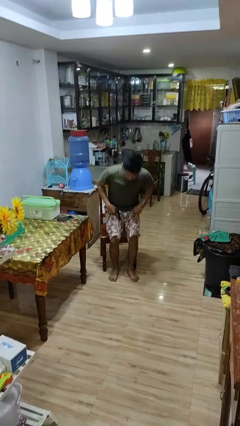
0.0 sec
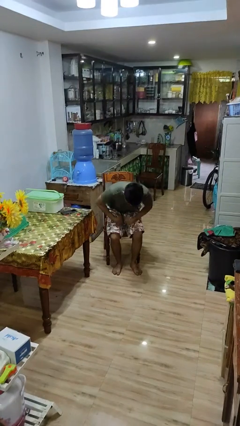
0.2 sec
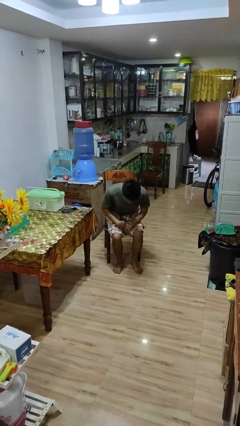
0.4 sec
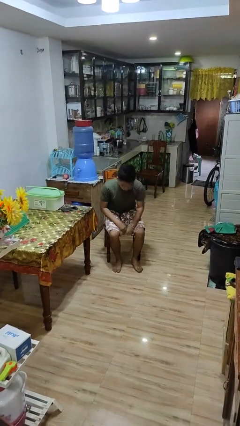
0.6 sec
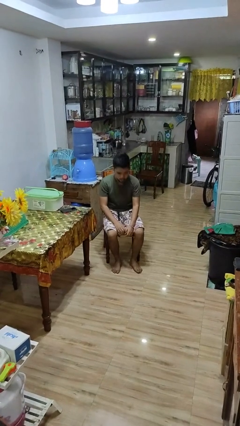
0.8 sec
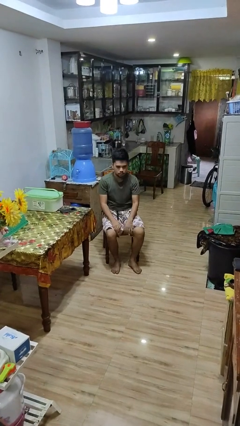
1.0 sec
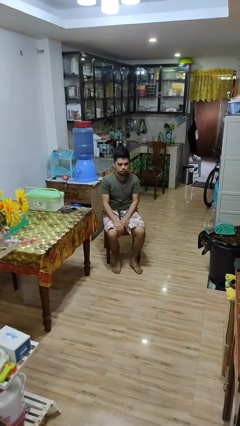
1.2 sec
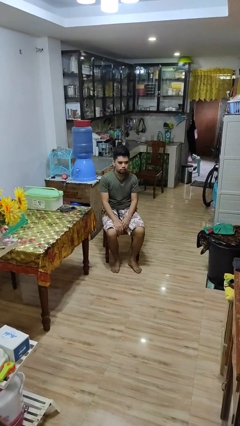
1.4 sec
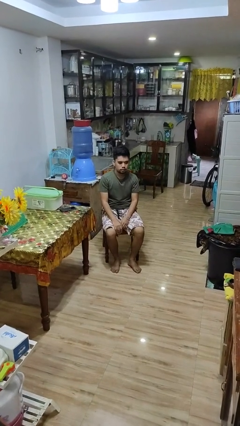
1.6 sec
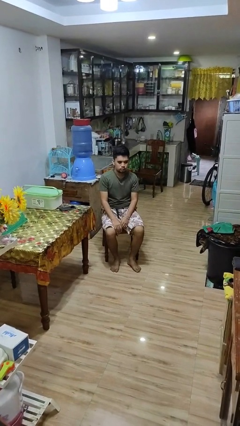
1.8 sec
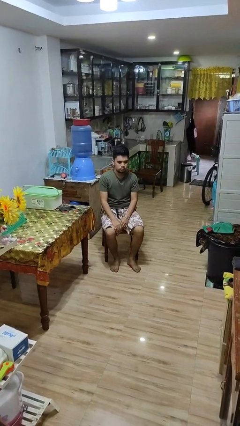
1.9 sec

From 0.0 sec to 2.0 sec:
person sits down

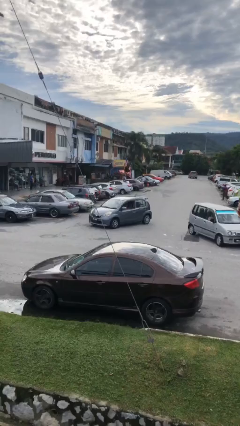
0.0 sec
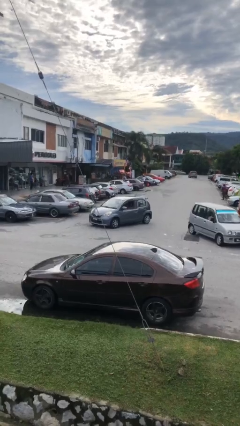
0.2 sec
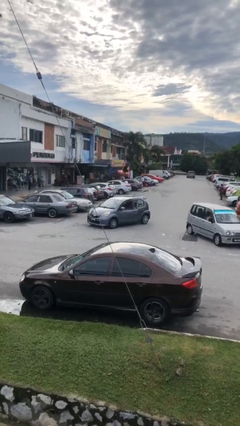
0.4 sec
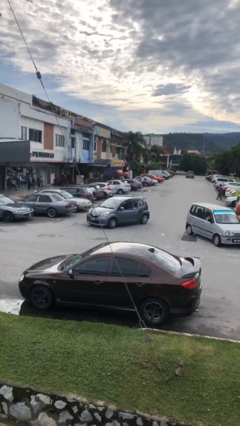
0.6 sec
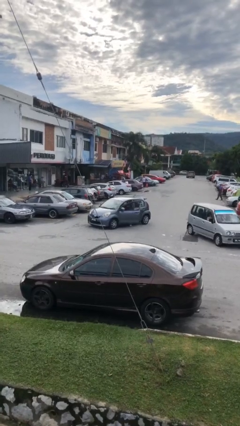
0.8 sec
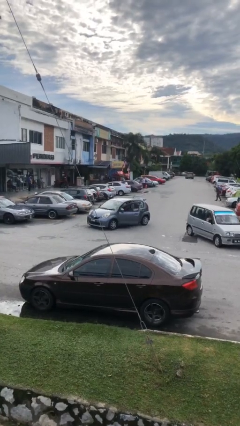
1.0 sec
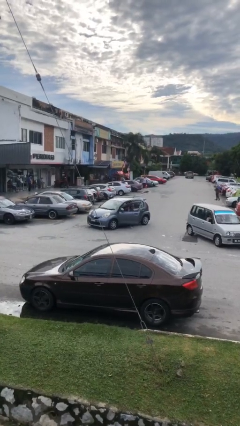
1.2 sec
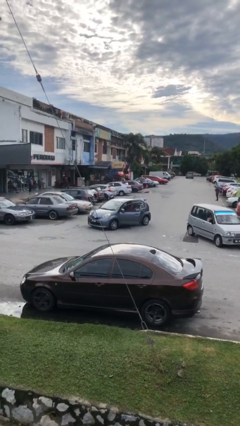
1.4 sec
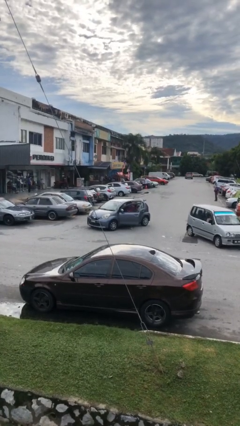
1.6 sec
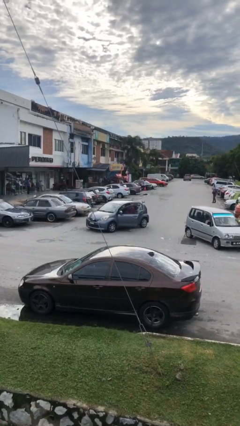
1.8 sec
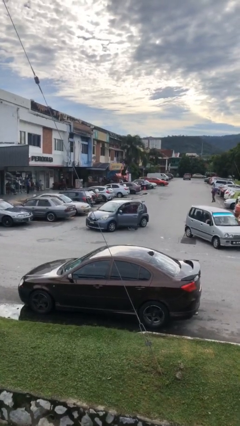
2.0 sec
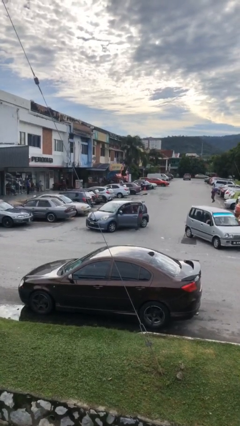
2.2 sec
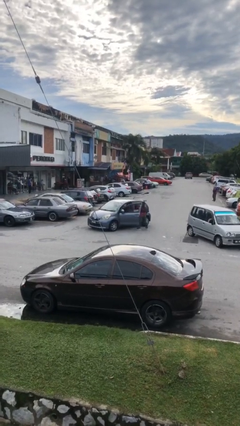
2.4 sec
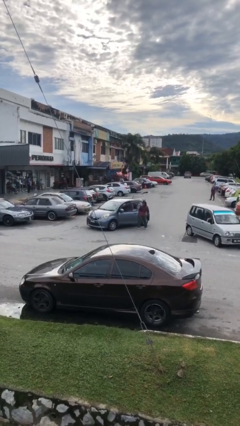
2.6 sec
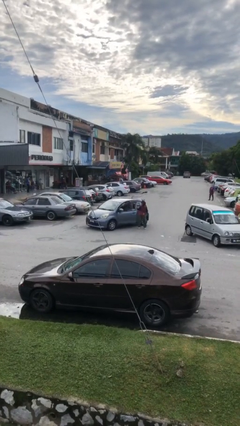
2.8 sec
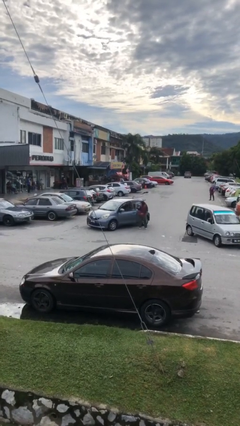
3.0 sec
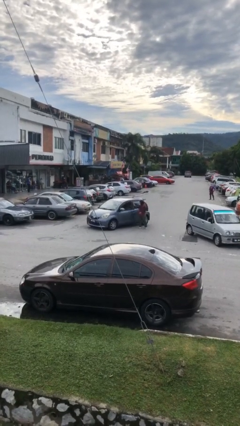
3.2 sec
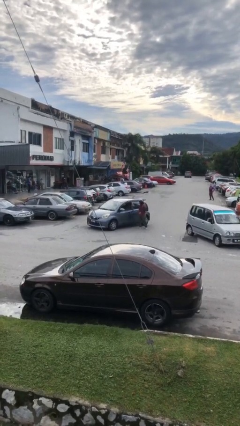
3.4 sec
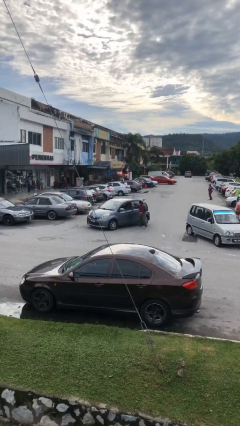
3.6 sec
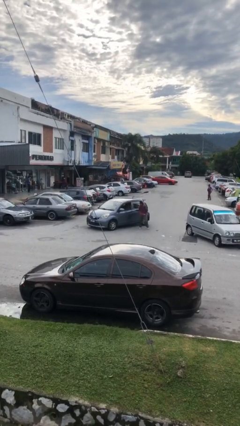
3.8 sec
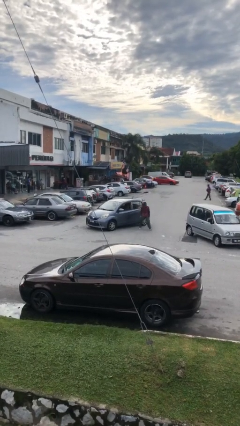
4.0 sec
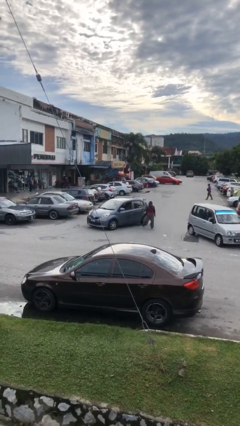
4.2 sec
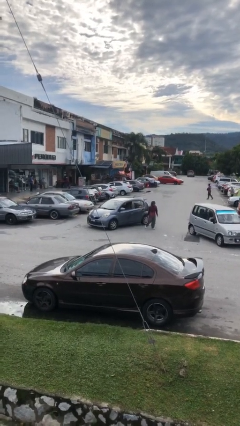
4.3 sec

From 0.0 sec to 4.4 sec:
car drops off person

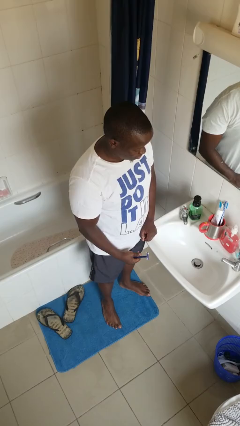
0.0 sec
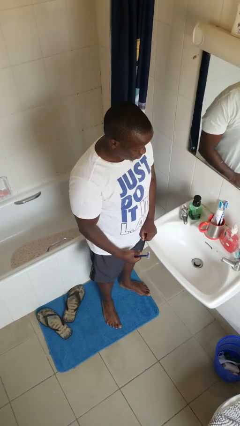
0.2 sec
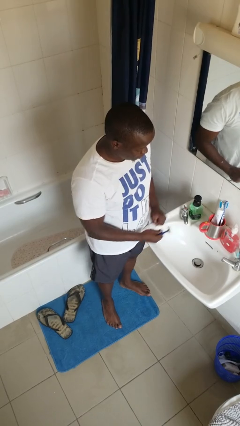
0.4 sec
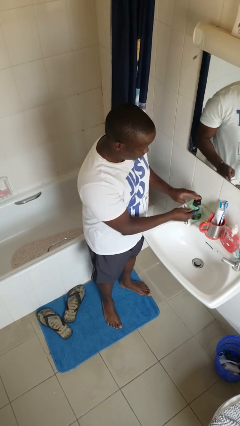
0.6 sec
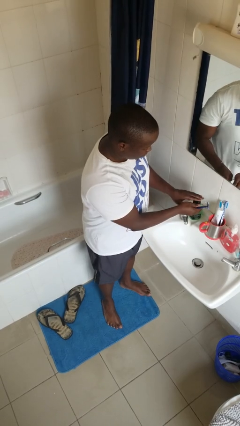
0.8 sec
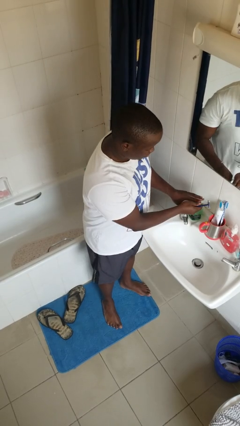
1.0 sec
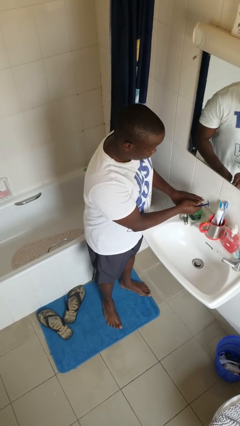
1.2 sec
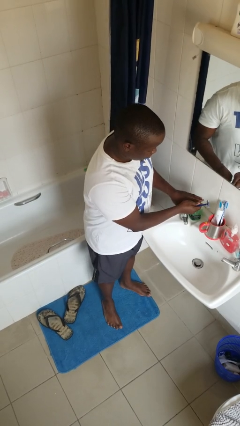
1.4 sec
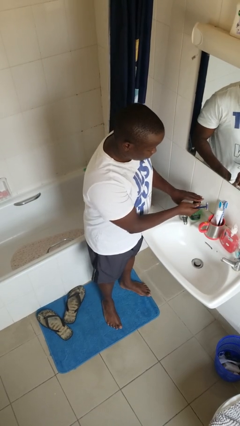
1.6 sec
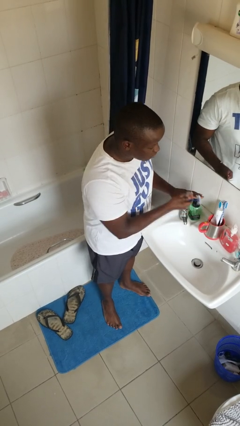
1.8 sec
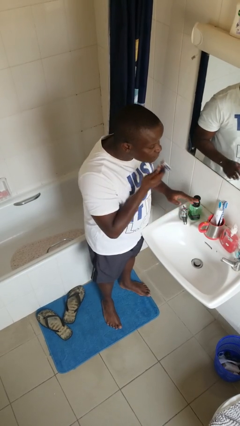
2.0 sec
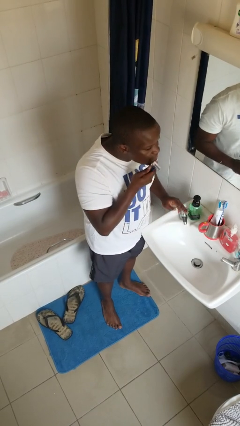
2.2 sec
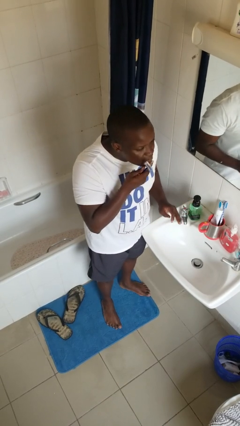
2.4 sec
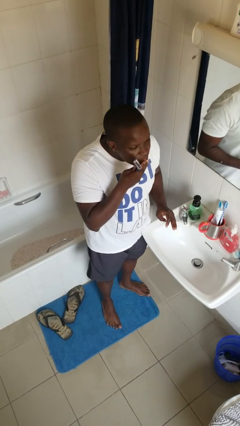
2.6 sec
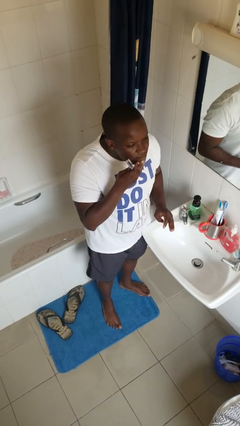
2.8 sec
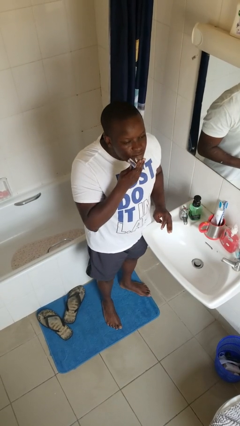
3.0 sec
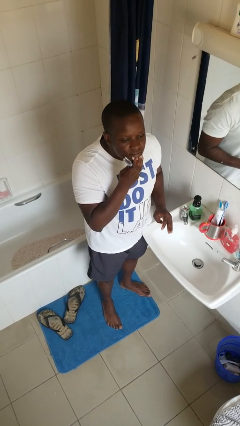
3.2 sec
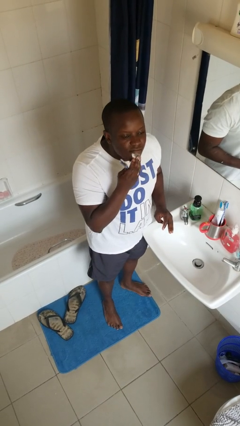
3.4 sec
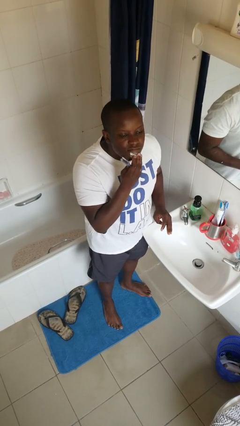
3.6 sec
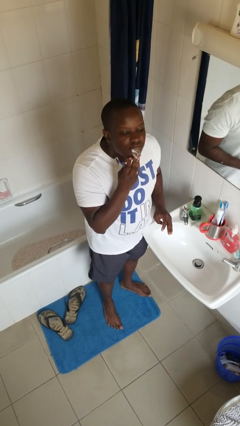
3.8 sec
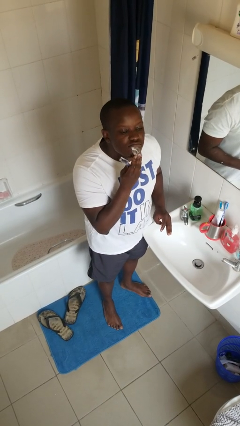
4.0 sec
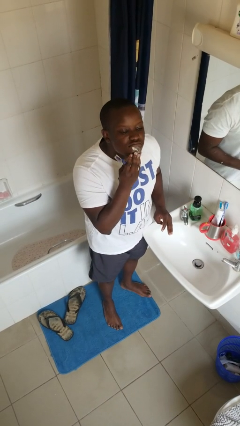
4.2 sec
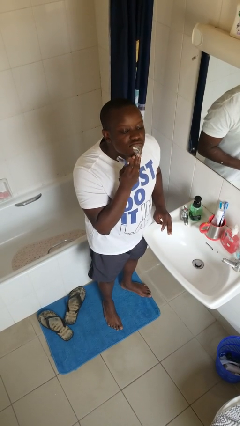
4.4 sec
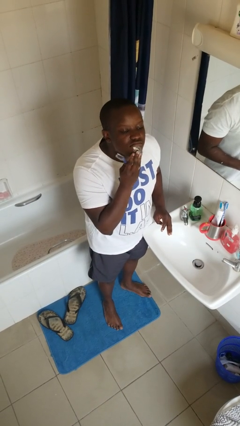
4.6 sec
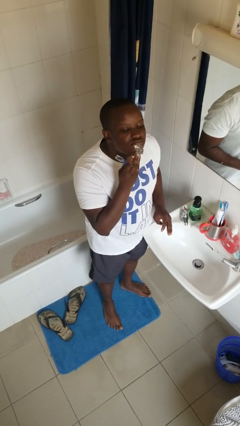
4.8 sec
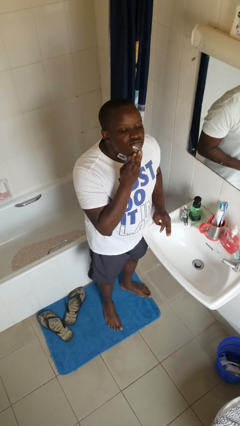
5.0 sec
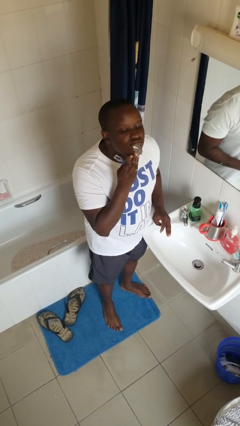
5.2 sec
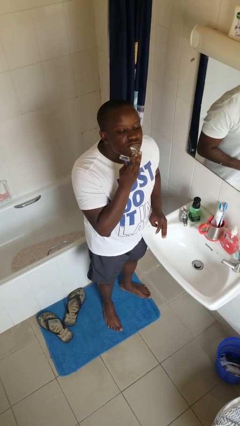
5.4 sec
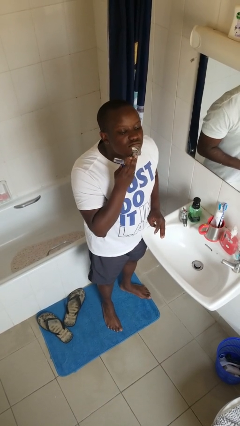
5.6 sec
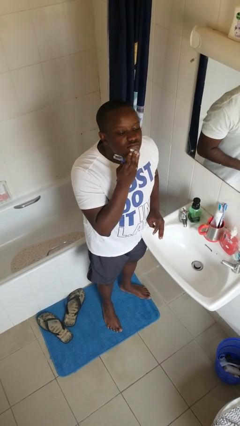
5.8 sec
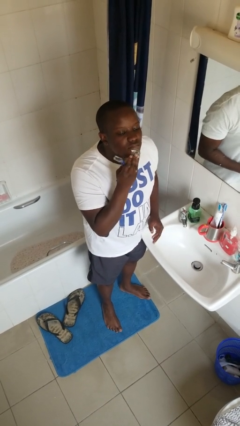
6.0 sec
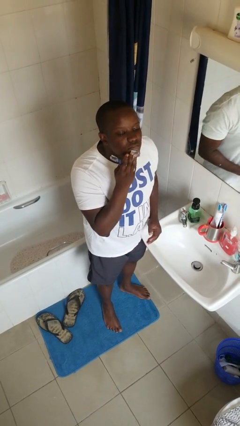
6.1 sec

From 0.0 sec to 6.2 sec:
person applies shaving cream

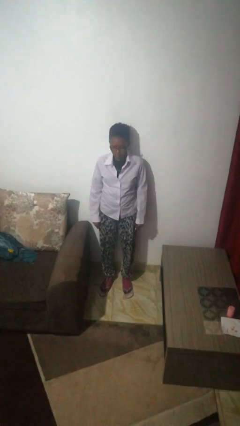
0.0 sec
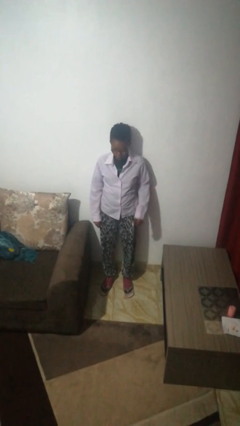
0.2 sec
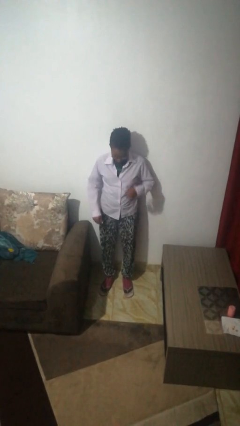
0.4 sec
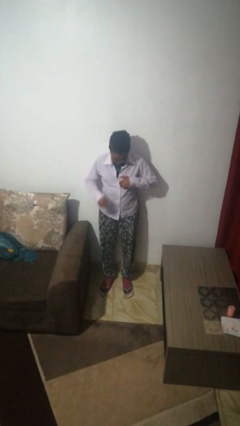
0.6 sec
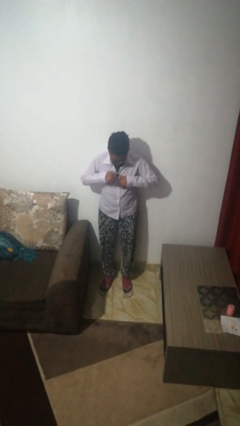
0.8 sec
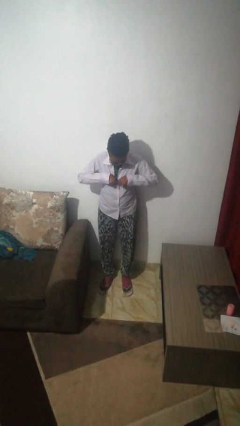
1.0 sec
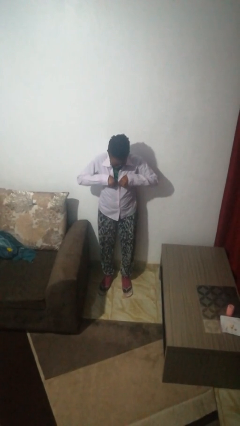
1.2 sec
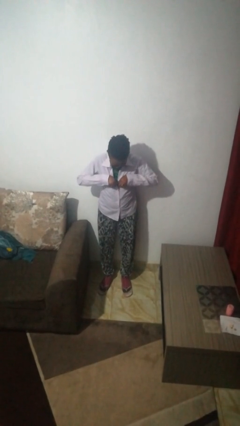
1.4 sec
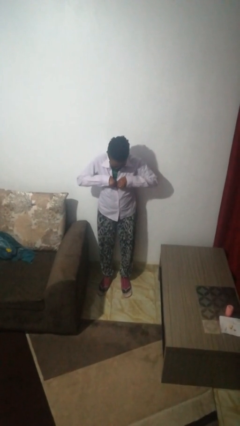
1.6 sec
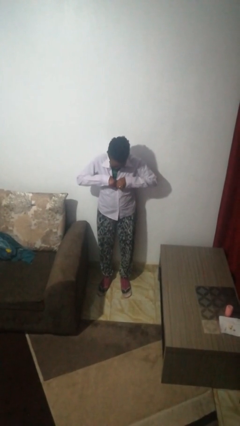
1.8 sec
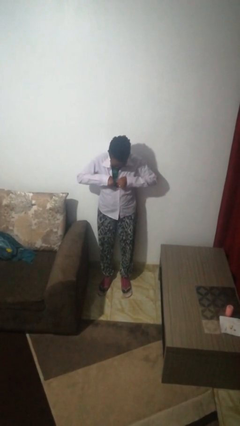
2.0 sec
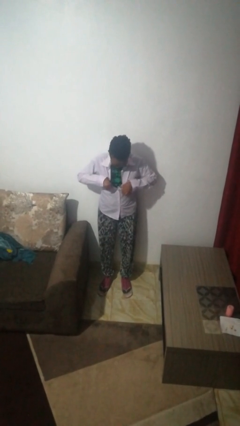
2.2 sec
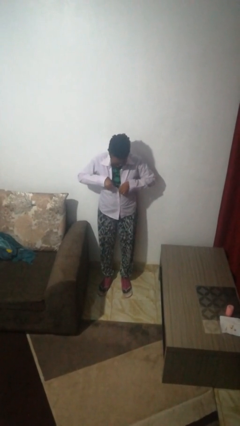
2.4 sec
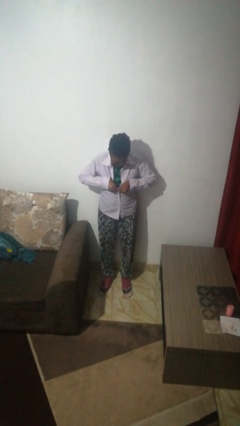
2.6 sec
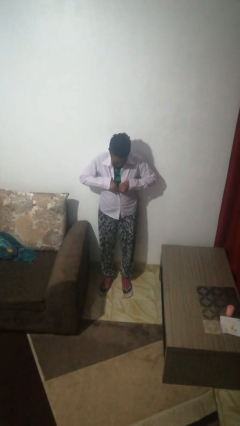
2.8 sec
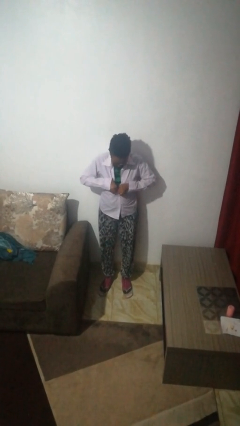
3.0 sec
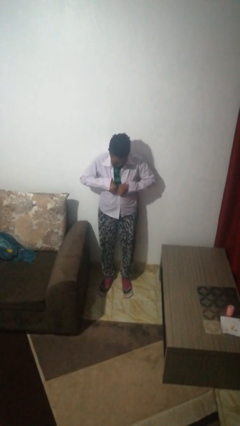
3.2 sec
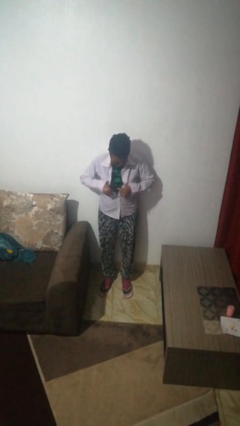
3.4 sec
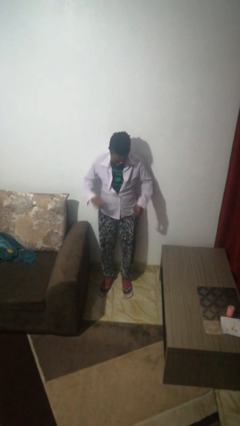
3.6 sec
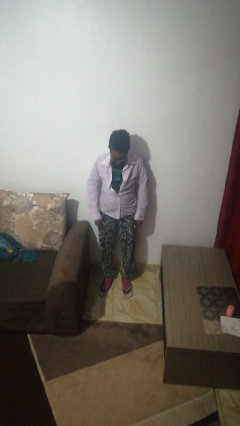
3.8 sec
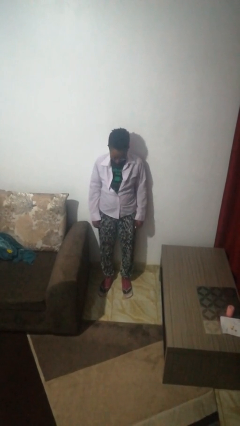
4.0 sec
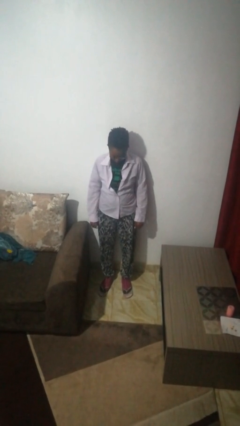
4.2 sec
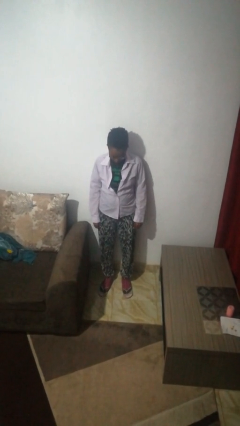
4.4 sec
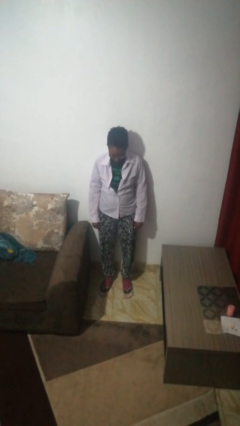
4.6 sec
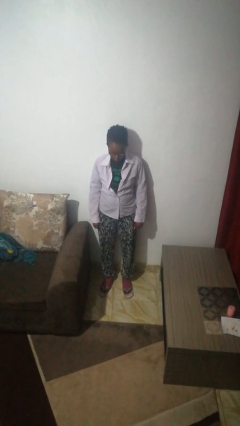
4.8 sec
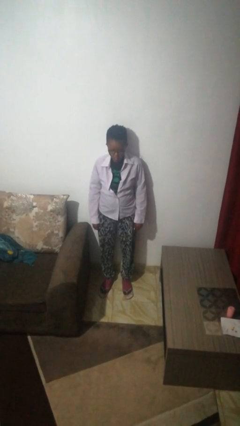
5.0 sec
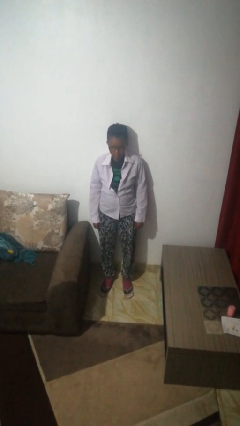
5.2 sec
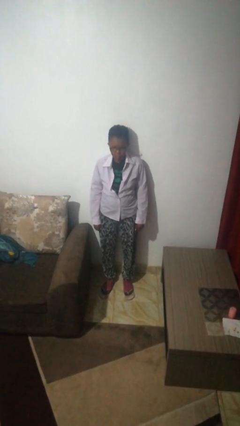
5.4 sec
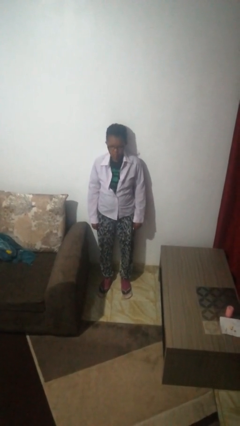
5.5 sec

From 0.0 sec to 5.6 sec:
person unbuttons shirt
